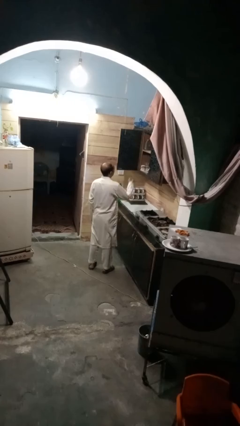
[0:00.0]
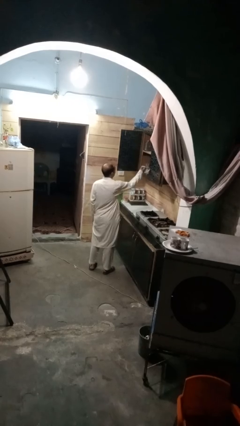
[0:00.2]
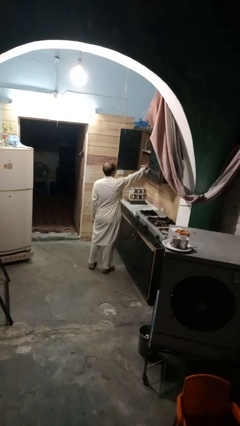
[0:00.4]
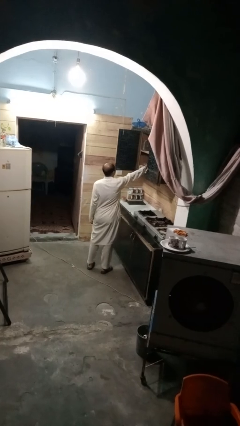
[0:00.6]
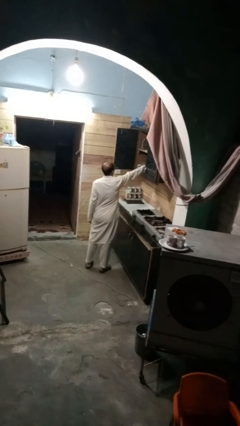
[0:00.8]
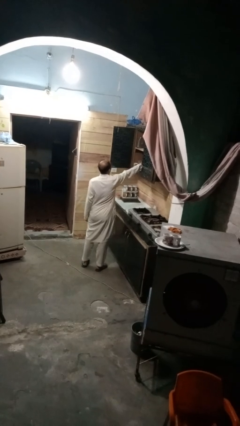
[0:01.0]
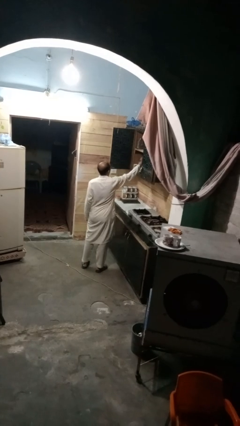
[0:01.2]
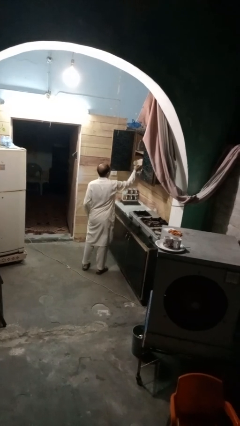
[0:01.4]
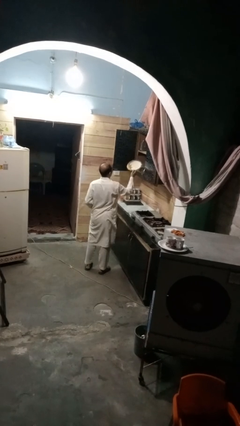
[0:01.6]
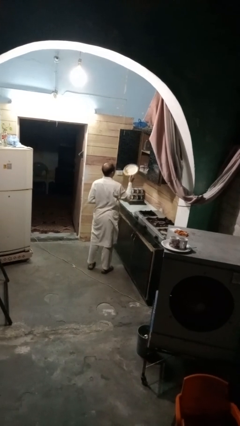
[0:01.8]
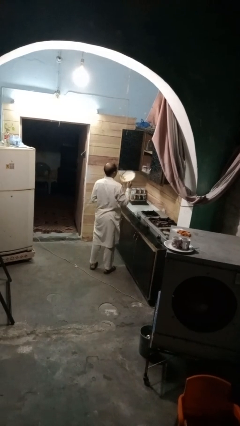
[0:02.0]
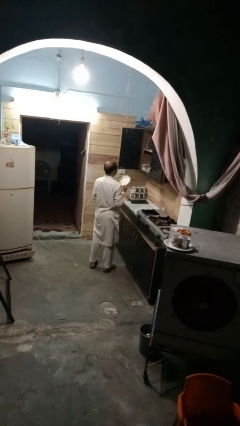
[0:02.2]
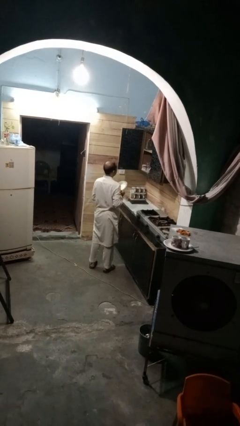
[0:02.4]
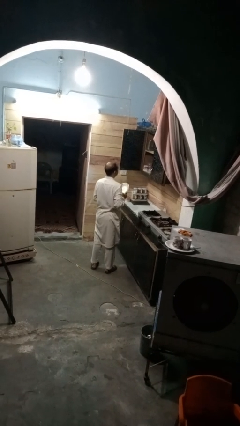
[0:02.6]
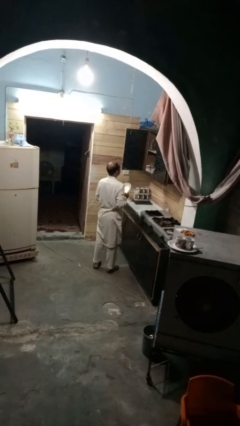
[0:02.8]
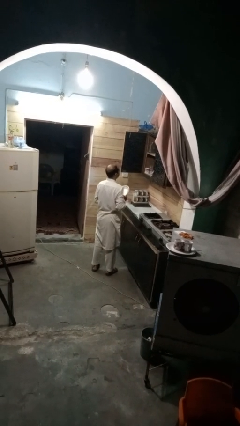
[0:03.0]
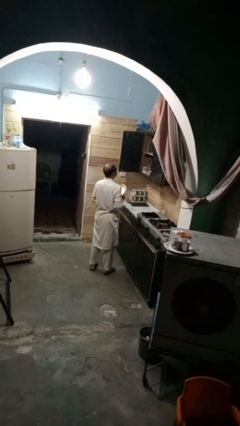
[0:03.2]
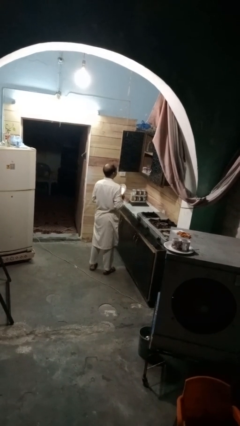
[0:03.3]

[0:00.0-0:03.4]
person takes object from cabinet

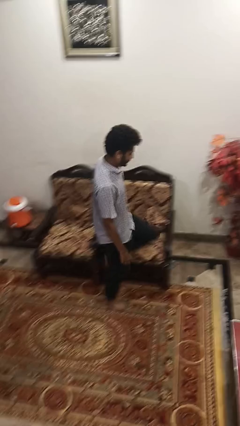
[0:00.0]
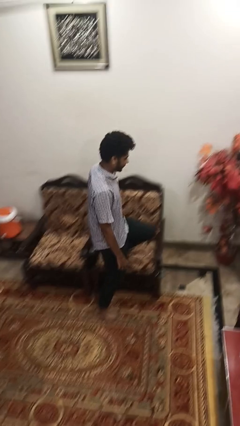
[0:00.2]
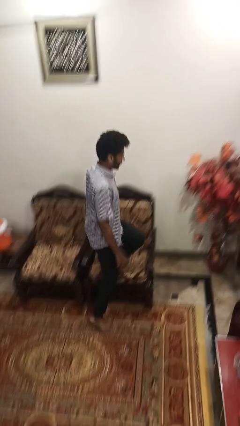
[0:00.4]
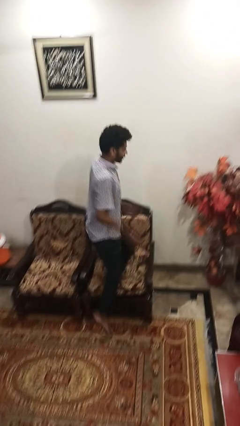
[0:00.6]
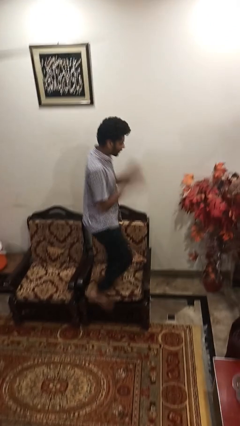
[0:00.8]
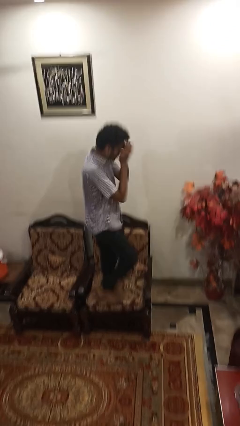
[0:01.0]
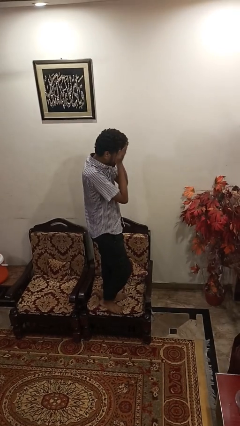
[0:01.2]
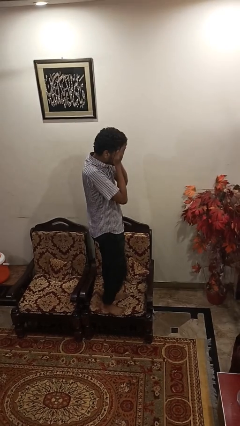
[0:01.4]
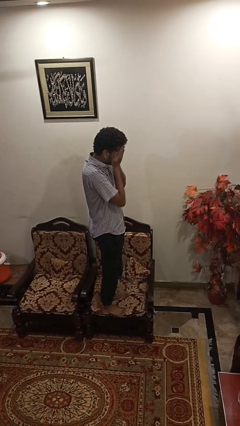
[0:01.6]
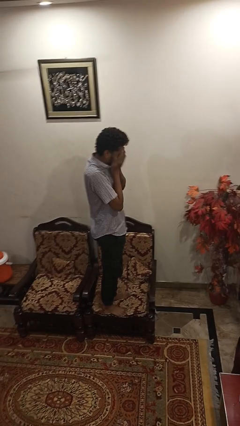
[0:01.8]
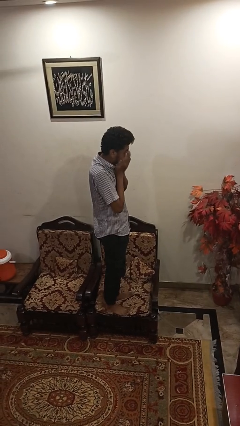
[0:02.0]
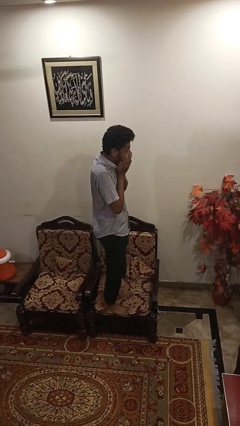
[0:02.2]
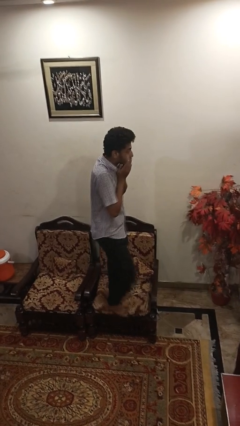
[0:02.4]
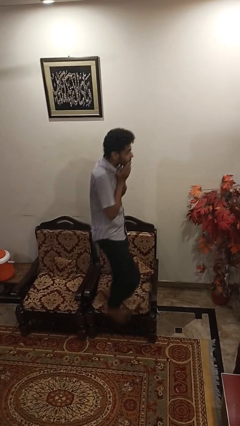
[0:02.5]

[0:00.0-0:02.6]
person climbs on couch

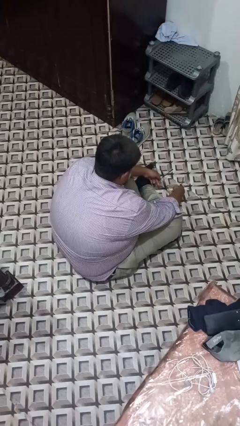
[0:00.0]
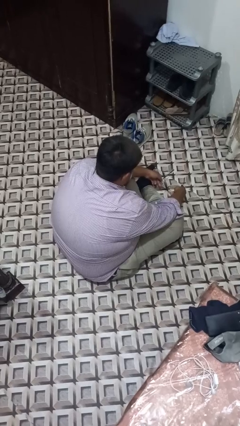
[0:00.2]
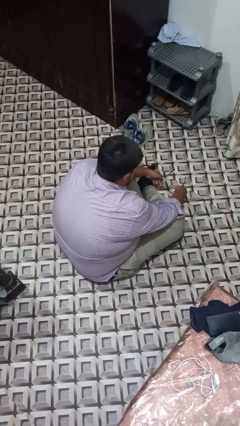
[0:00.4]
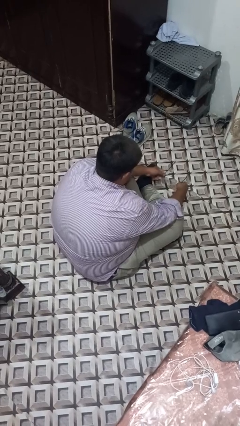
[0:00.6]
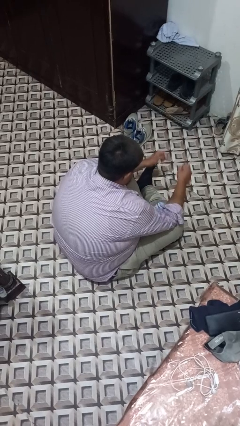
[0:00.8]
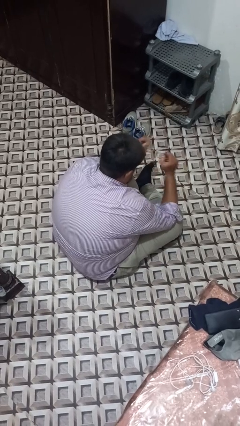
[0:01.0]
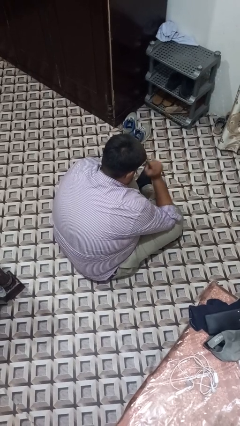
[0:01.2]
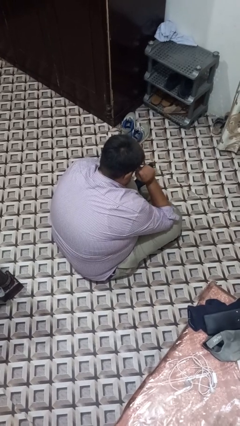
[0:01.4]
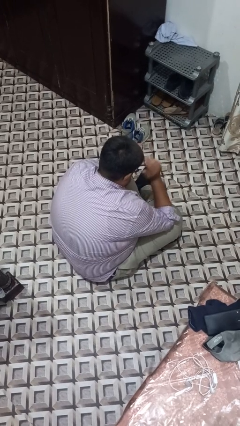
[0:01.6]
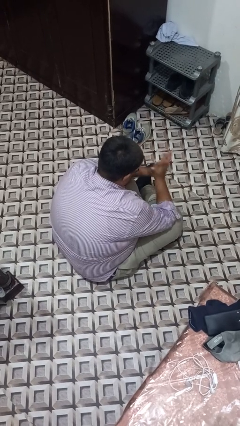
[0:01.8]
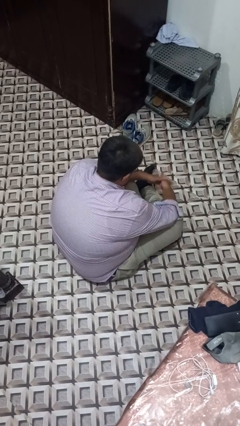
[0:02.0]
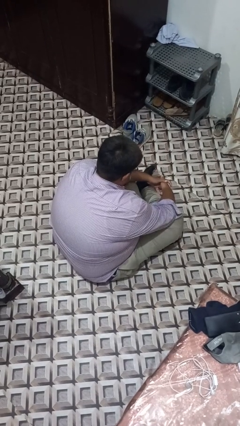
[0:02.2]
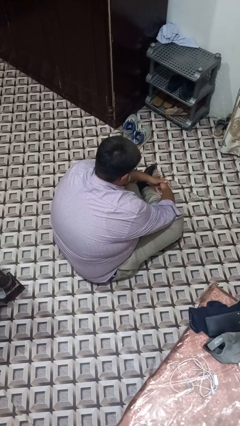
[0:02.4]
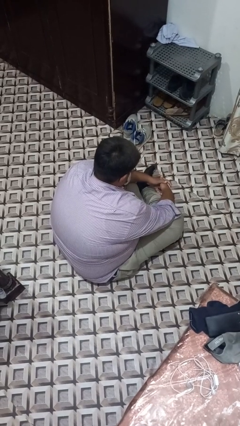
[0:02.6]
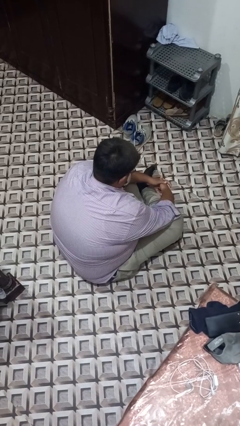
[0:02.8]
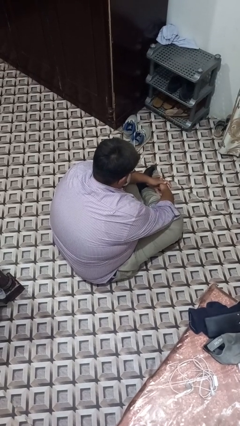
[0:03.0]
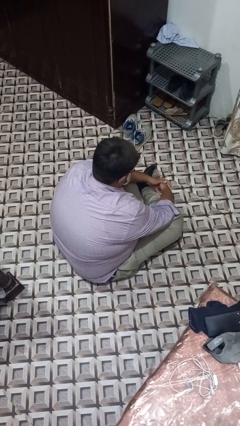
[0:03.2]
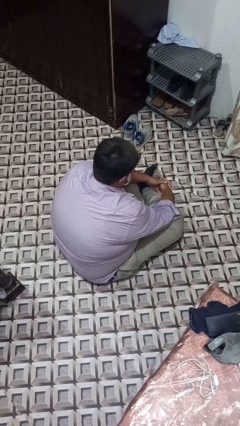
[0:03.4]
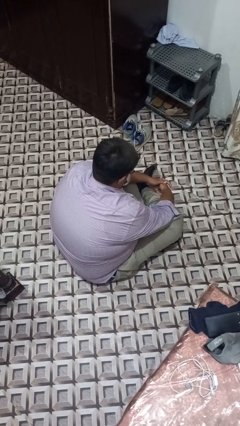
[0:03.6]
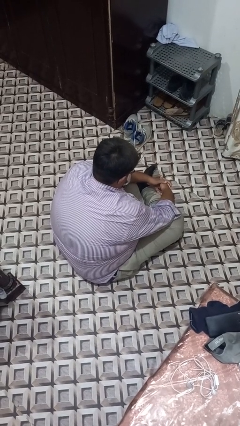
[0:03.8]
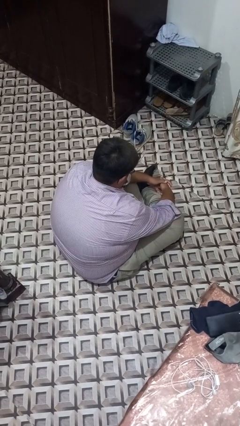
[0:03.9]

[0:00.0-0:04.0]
person puts on glasses

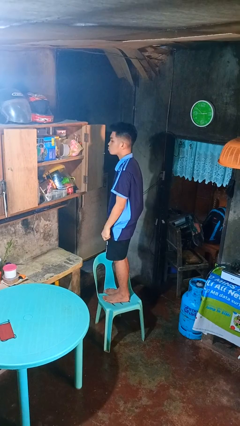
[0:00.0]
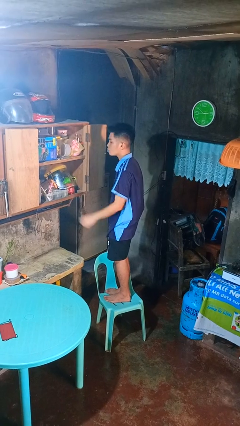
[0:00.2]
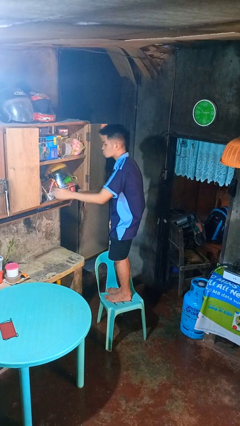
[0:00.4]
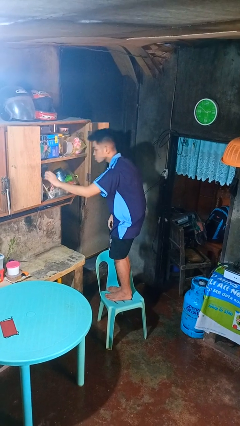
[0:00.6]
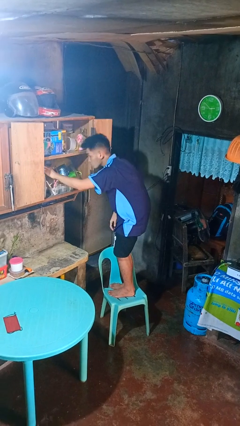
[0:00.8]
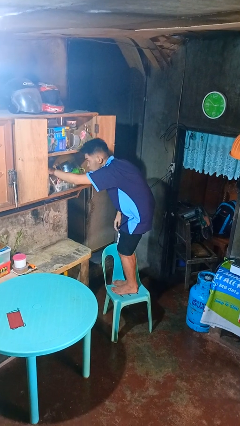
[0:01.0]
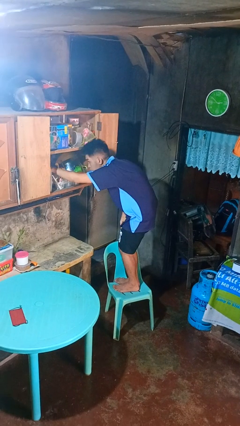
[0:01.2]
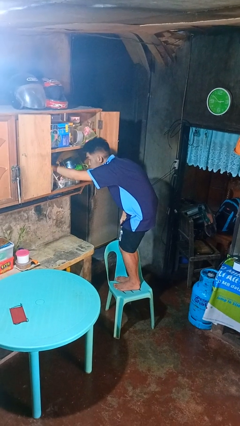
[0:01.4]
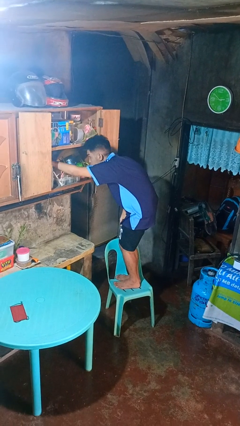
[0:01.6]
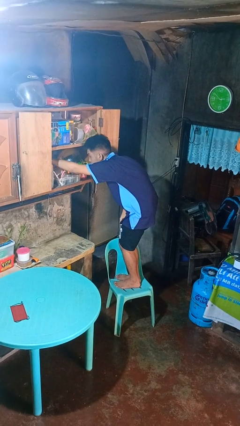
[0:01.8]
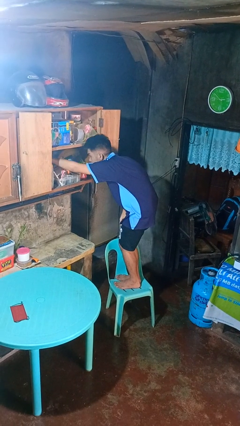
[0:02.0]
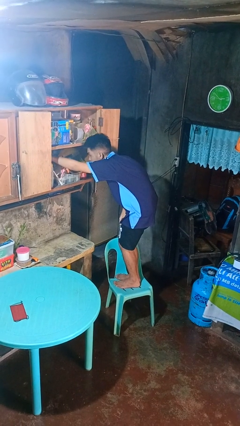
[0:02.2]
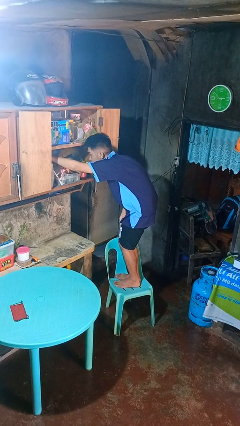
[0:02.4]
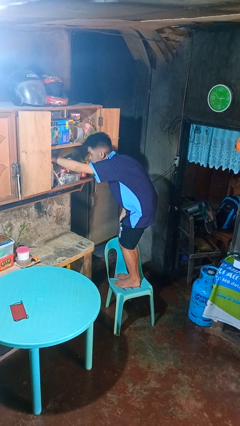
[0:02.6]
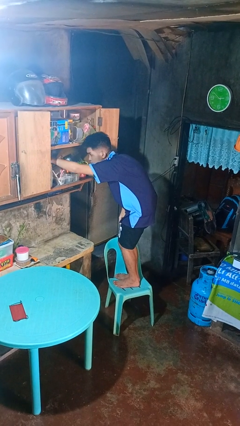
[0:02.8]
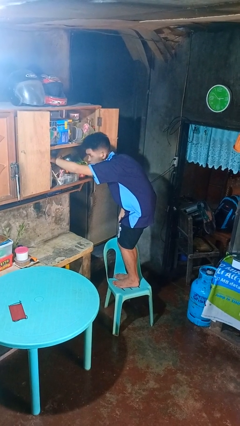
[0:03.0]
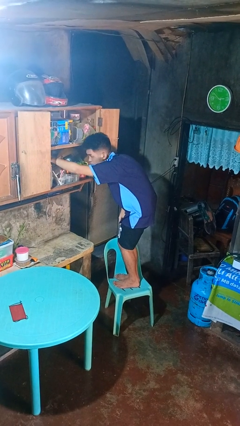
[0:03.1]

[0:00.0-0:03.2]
person searches in cabinet

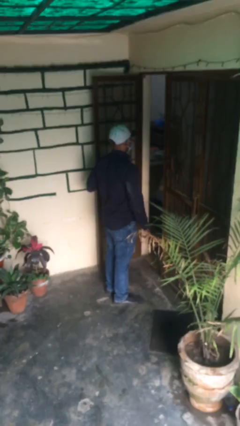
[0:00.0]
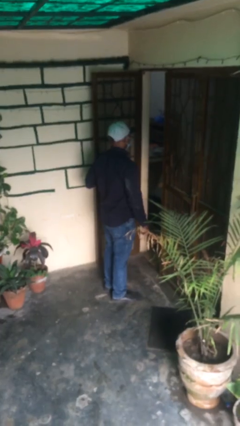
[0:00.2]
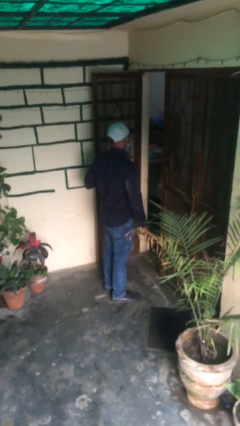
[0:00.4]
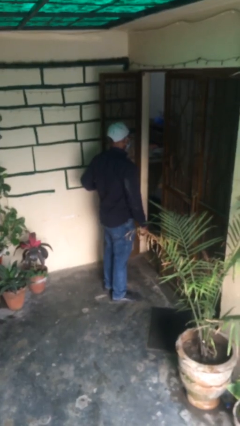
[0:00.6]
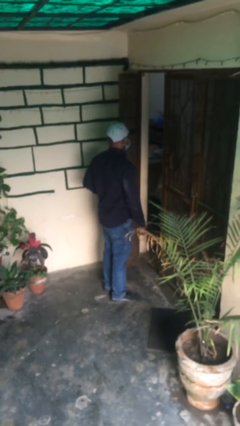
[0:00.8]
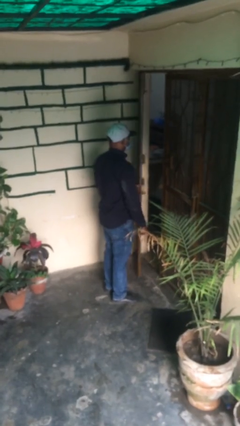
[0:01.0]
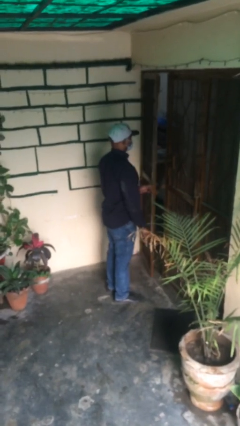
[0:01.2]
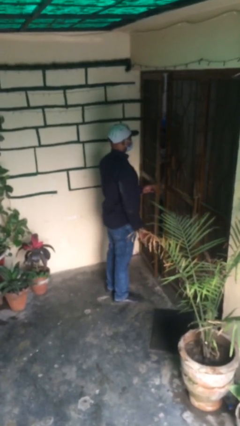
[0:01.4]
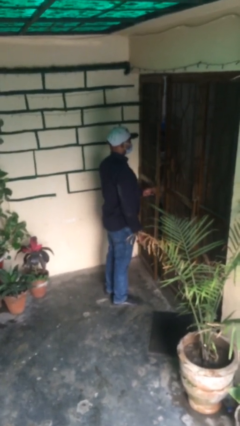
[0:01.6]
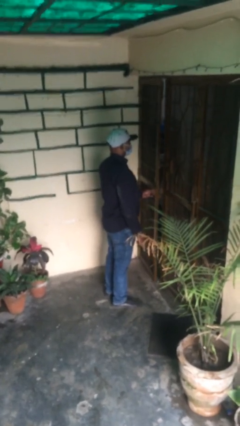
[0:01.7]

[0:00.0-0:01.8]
person closes facility door

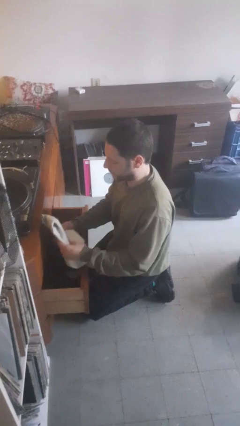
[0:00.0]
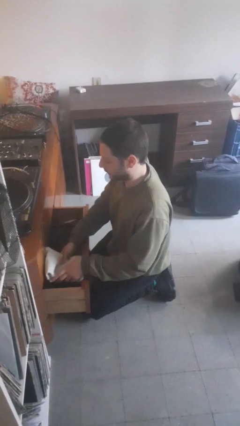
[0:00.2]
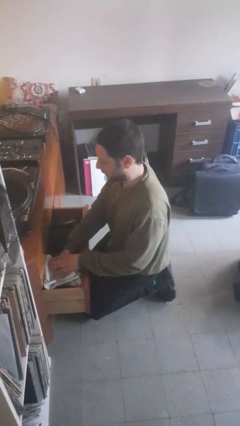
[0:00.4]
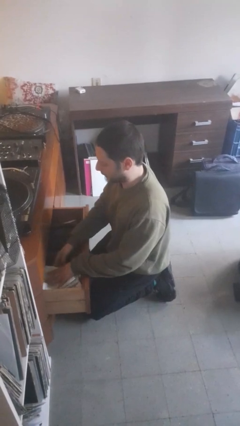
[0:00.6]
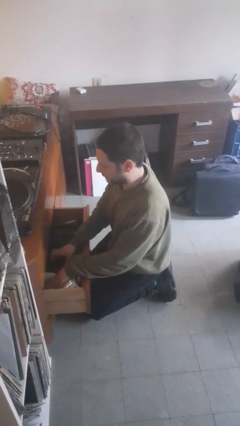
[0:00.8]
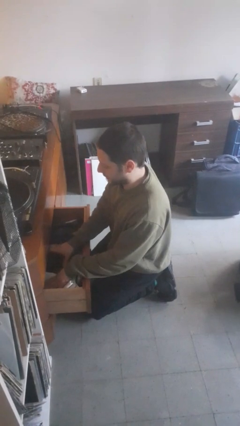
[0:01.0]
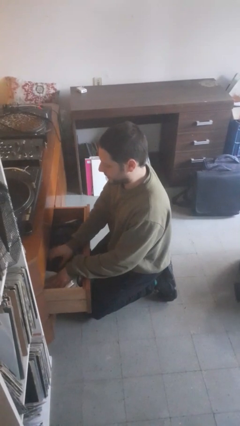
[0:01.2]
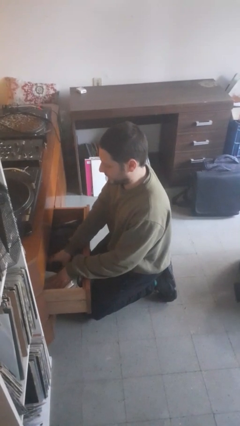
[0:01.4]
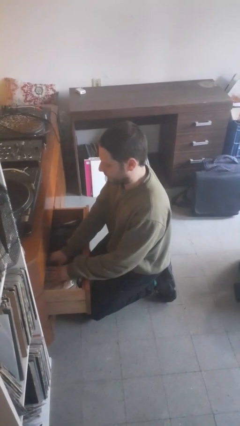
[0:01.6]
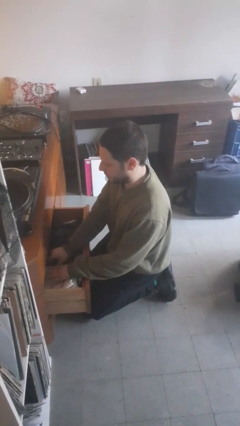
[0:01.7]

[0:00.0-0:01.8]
person puts clothes into dresser

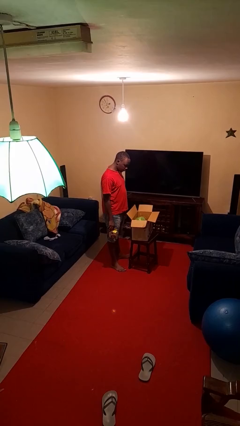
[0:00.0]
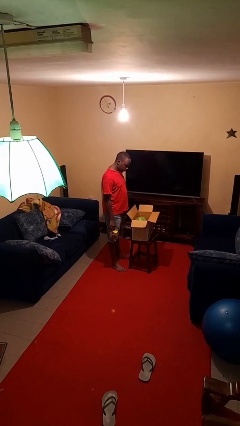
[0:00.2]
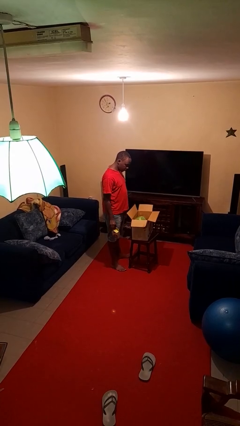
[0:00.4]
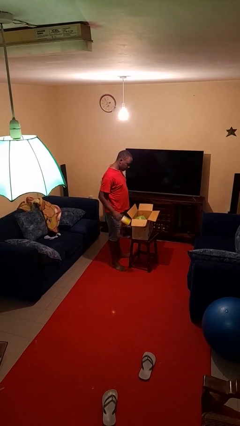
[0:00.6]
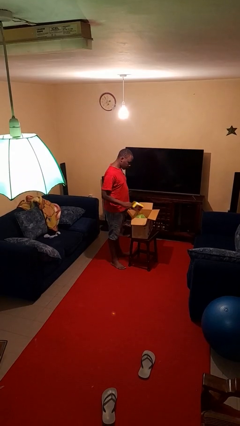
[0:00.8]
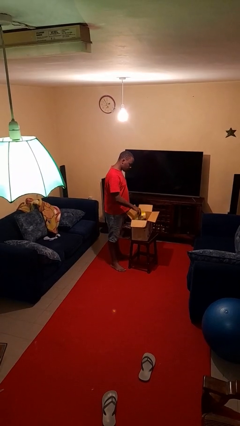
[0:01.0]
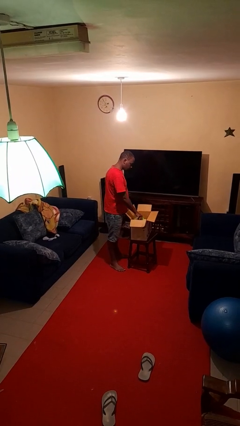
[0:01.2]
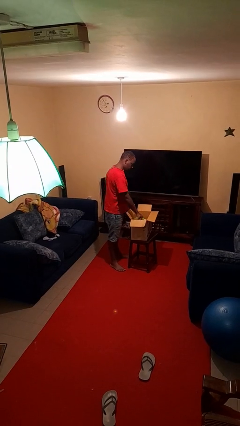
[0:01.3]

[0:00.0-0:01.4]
person puts object into box
